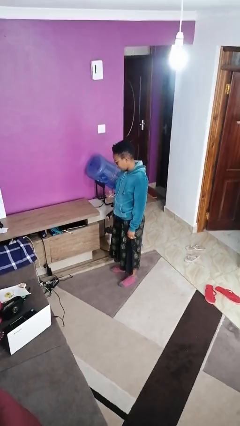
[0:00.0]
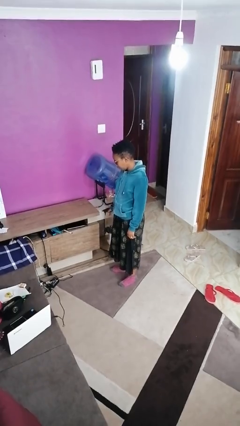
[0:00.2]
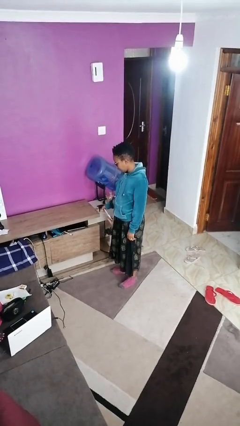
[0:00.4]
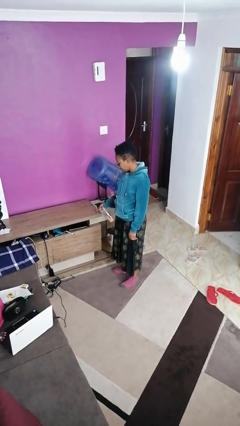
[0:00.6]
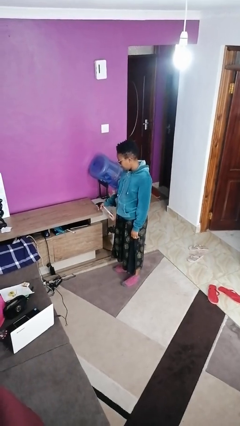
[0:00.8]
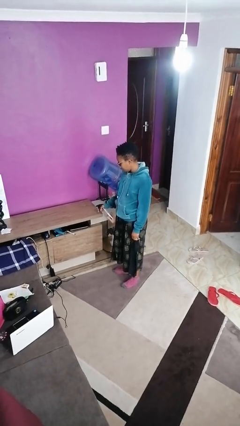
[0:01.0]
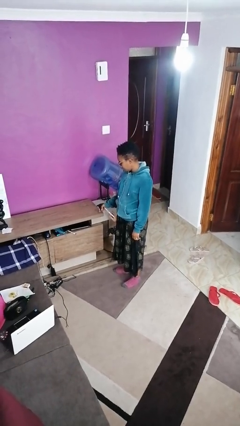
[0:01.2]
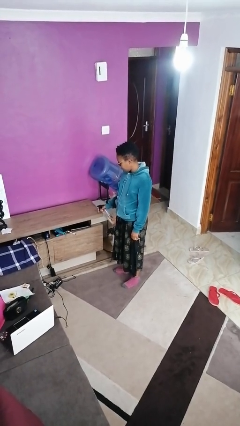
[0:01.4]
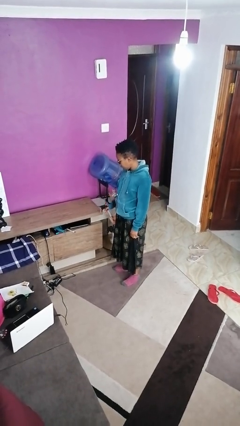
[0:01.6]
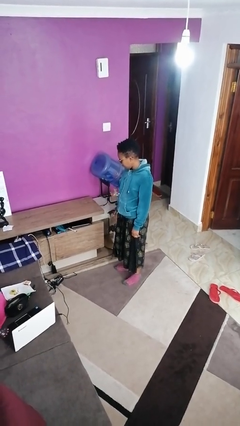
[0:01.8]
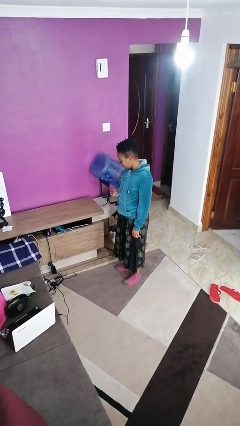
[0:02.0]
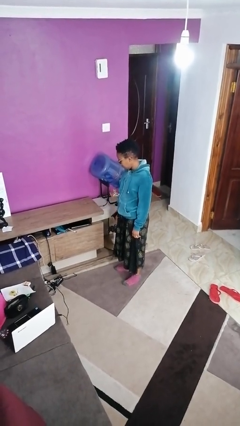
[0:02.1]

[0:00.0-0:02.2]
person sprays from bottle

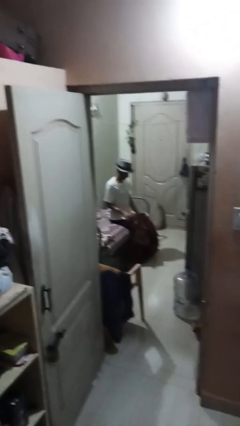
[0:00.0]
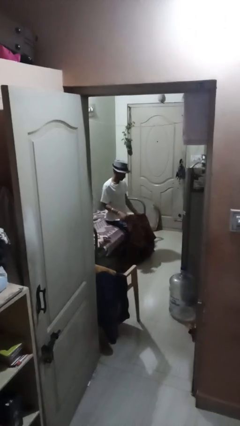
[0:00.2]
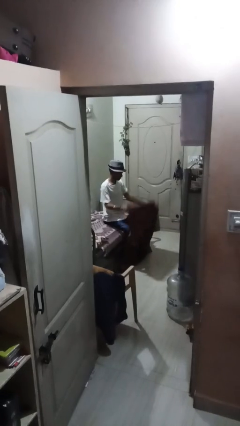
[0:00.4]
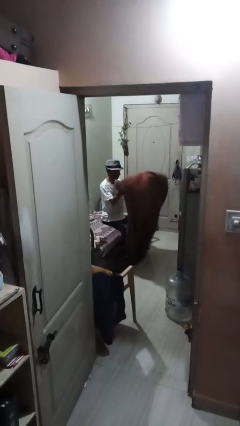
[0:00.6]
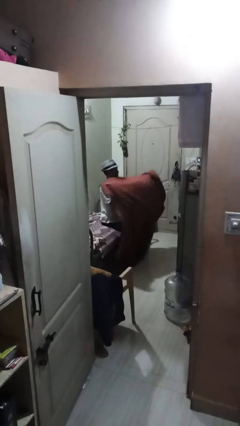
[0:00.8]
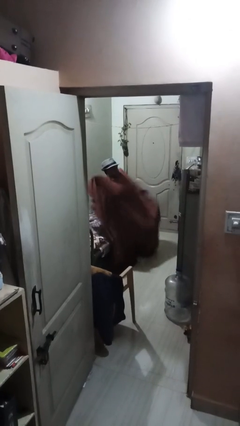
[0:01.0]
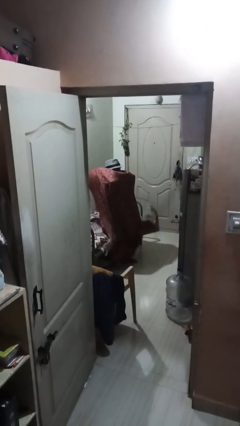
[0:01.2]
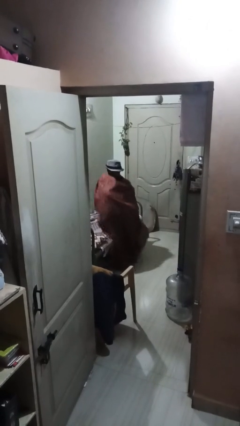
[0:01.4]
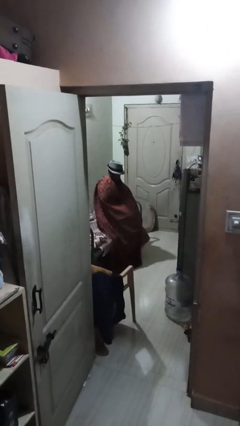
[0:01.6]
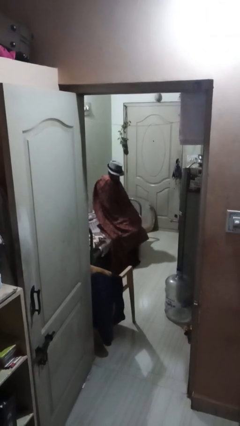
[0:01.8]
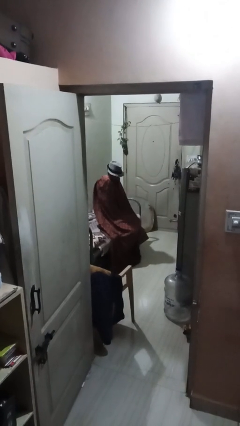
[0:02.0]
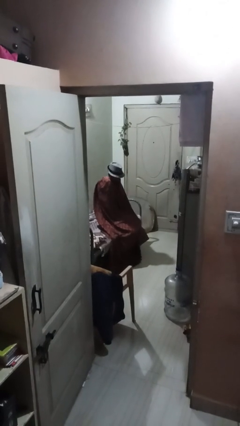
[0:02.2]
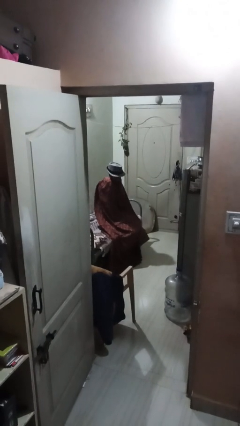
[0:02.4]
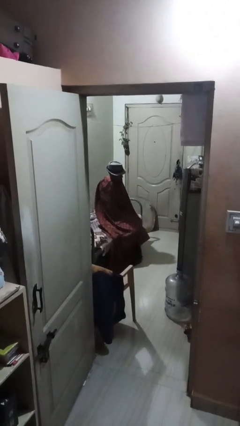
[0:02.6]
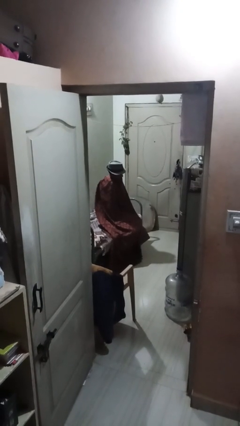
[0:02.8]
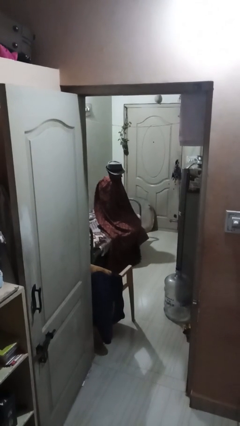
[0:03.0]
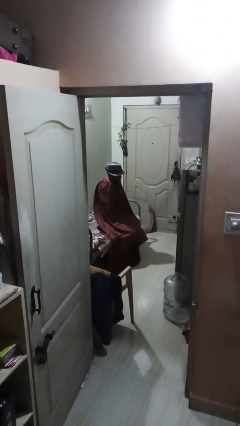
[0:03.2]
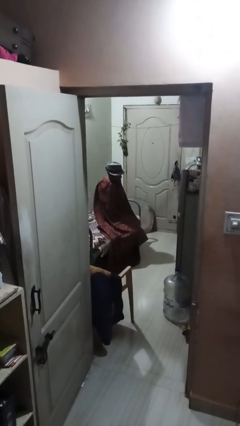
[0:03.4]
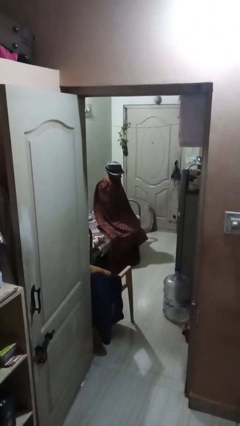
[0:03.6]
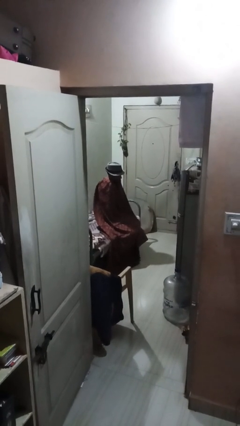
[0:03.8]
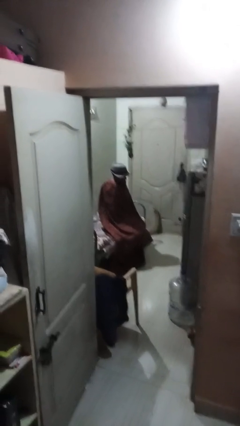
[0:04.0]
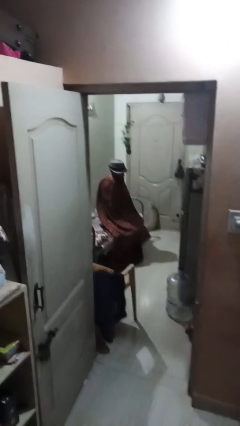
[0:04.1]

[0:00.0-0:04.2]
person covers with blanket

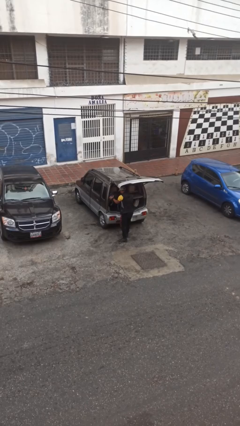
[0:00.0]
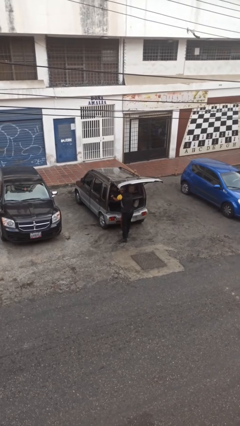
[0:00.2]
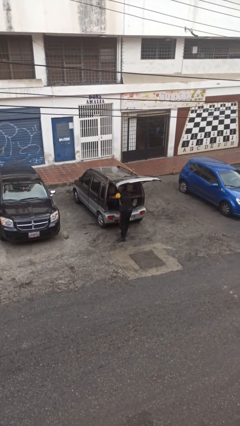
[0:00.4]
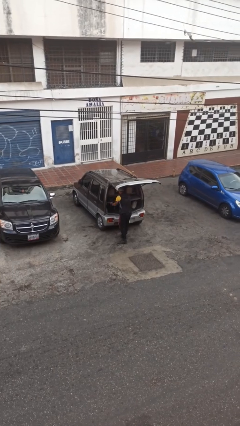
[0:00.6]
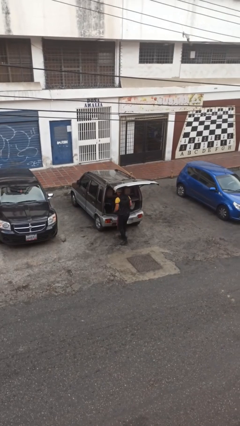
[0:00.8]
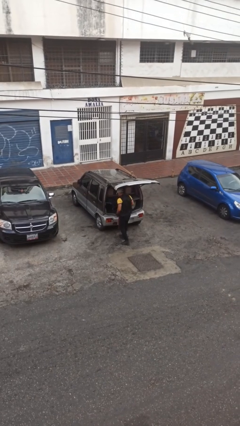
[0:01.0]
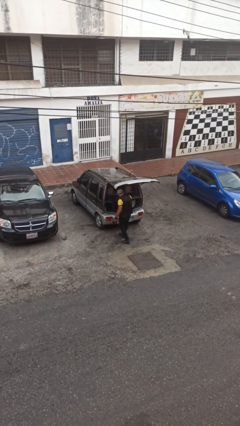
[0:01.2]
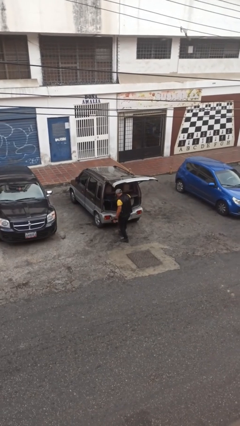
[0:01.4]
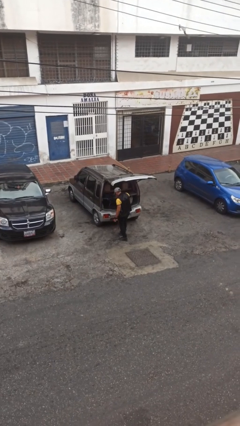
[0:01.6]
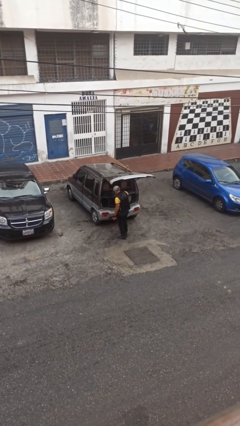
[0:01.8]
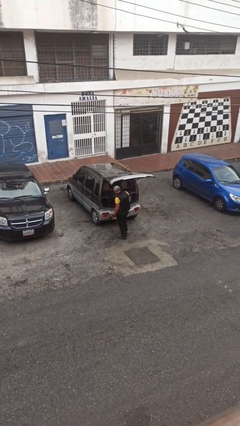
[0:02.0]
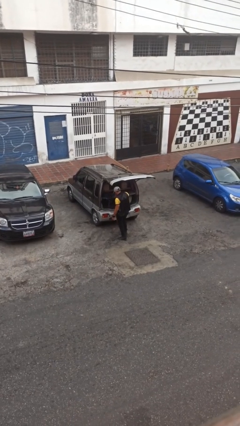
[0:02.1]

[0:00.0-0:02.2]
person loads car

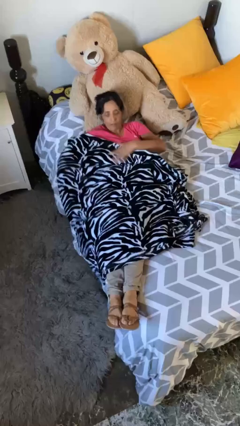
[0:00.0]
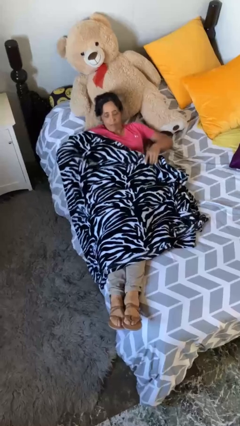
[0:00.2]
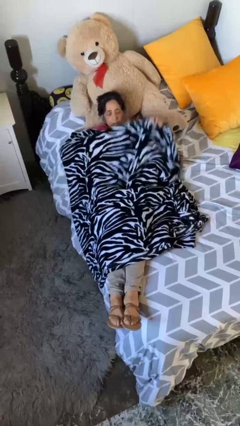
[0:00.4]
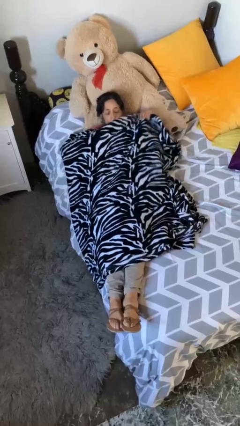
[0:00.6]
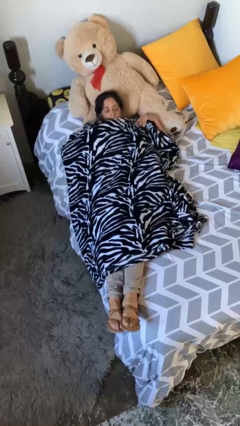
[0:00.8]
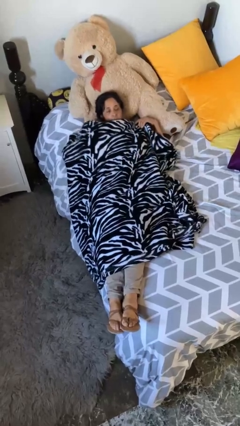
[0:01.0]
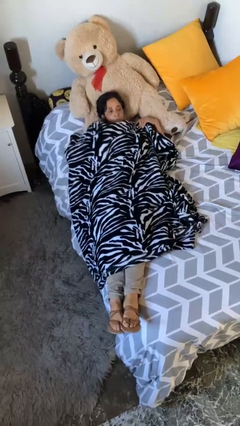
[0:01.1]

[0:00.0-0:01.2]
person covers with bedsheets

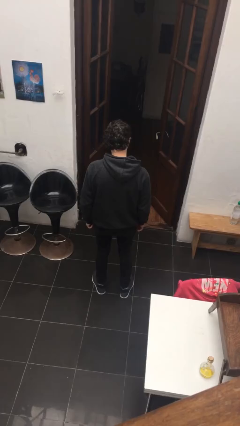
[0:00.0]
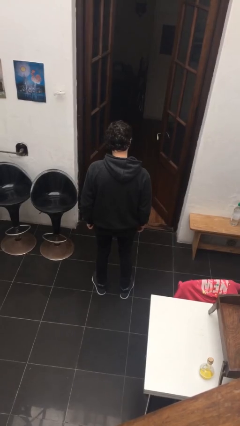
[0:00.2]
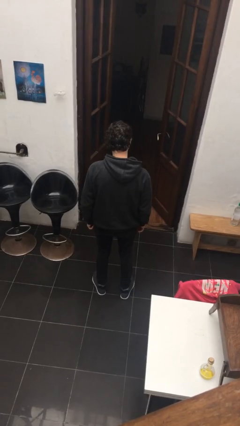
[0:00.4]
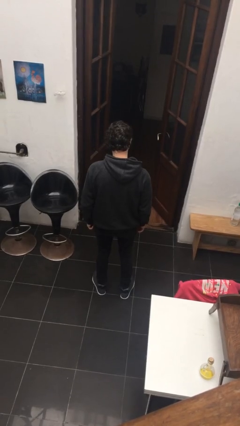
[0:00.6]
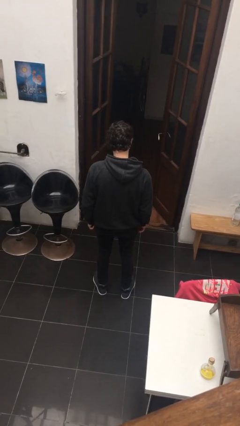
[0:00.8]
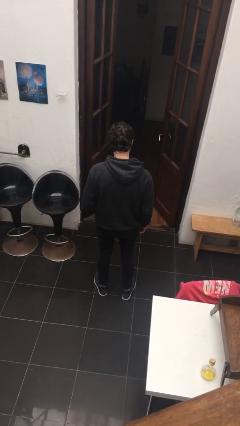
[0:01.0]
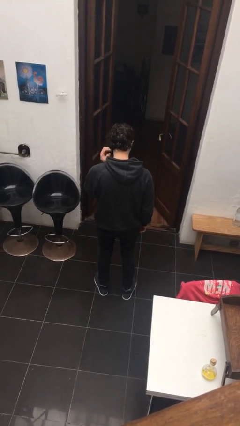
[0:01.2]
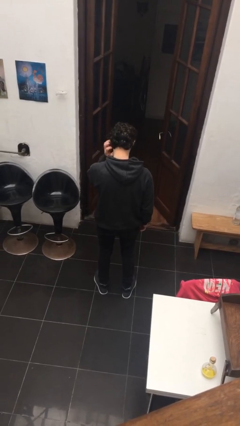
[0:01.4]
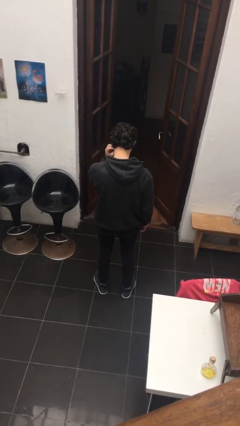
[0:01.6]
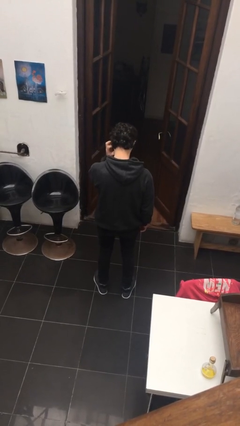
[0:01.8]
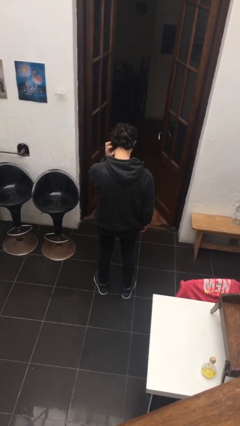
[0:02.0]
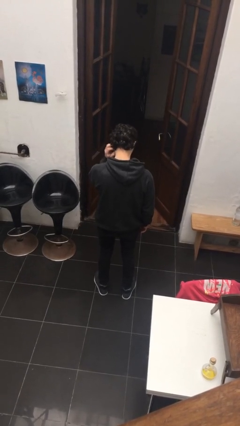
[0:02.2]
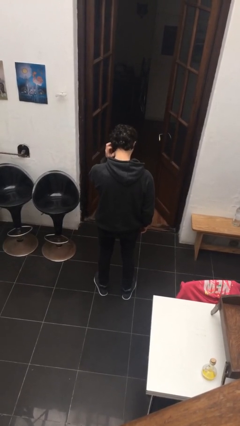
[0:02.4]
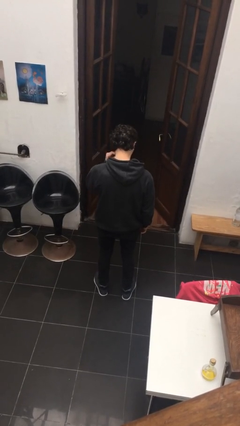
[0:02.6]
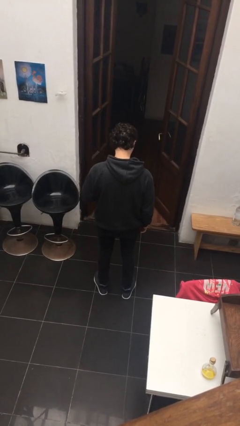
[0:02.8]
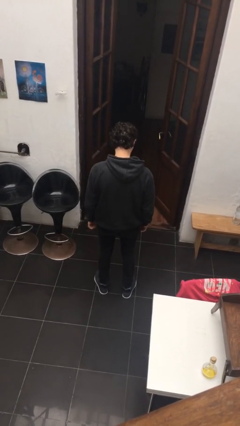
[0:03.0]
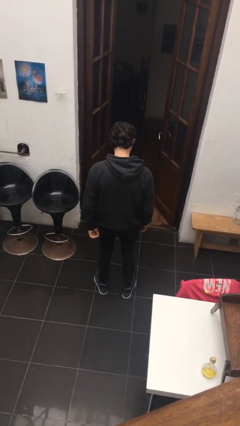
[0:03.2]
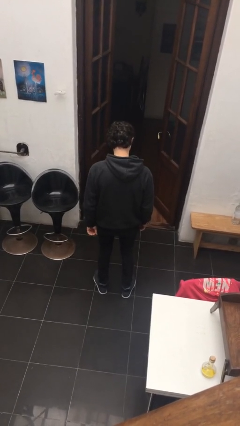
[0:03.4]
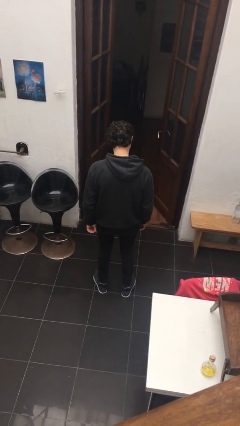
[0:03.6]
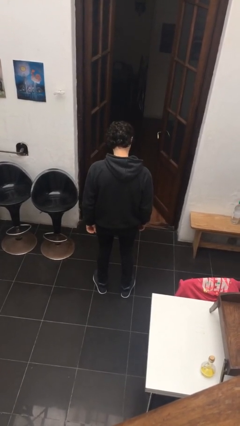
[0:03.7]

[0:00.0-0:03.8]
person scratches face

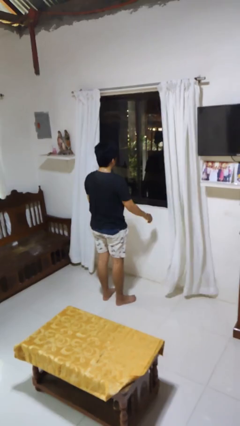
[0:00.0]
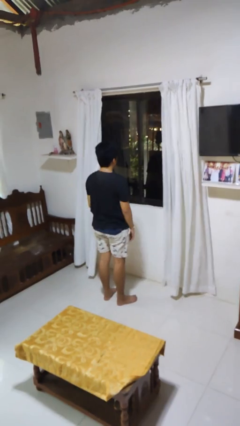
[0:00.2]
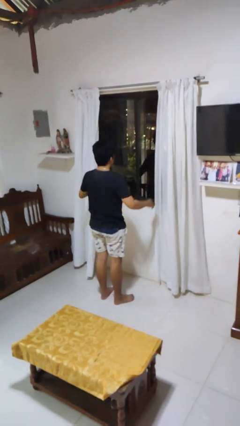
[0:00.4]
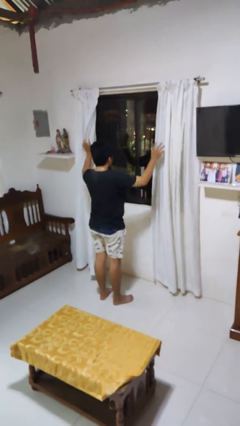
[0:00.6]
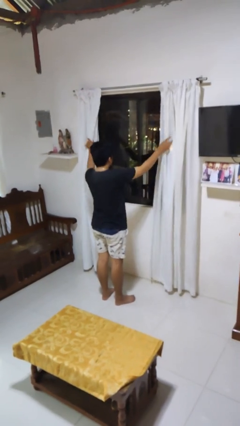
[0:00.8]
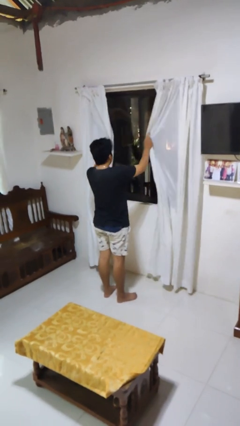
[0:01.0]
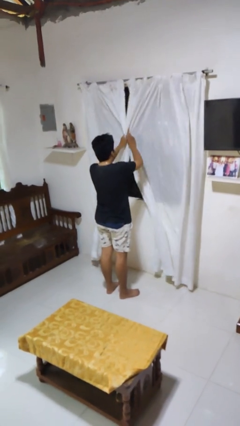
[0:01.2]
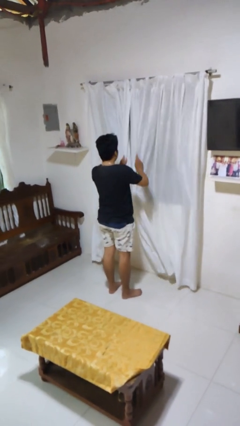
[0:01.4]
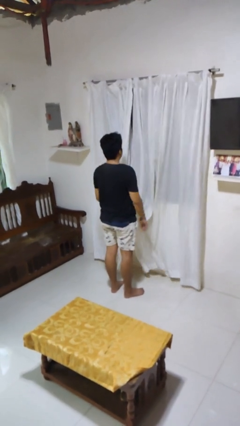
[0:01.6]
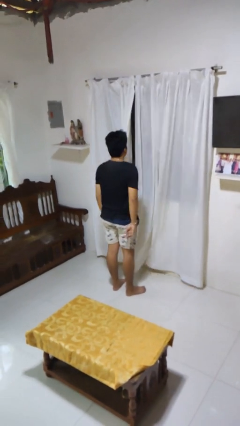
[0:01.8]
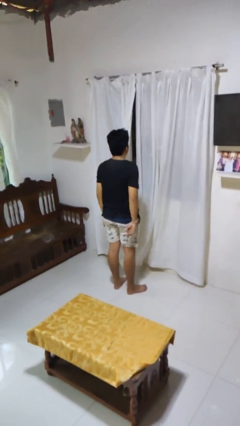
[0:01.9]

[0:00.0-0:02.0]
person closes curtains

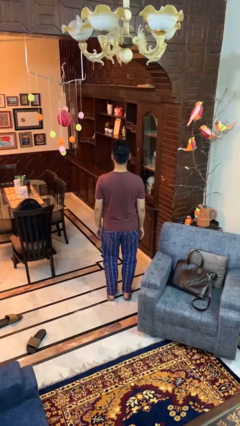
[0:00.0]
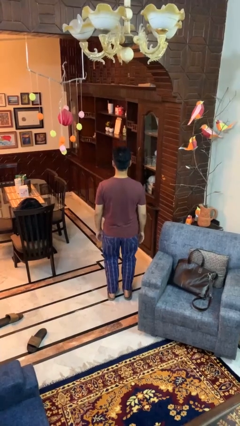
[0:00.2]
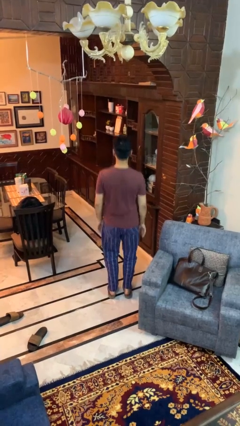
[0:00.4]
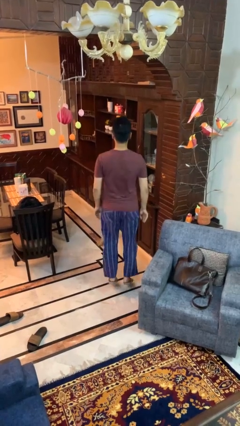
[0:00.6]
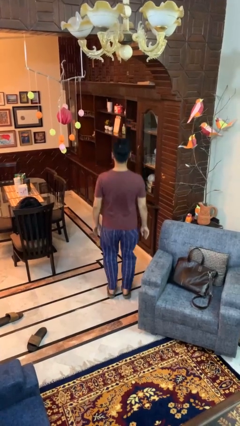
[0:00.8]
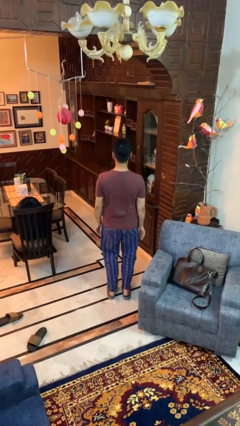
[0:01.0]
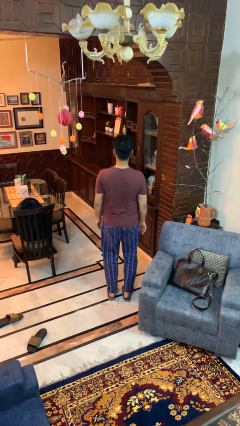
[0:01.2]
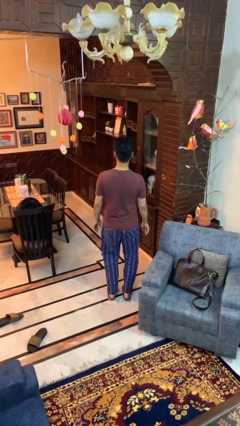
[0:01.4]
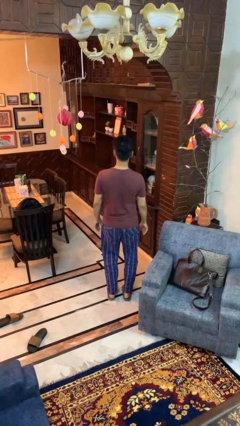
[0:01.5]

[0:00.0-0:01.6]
person jumps
